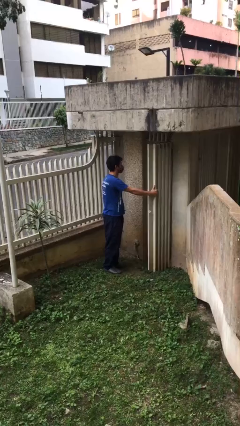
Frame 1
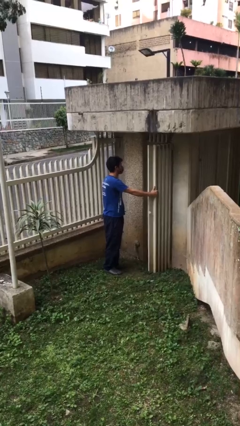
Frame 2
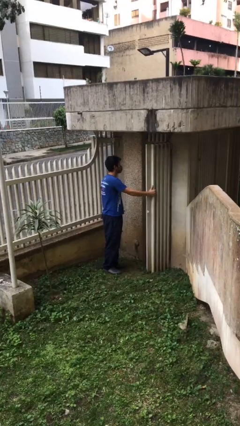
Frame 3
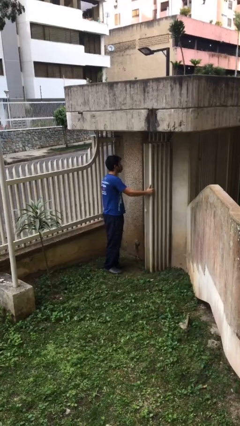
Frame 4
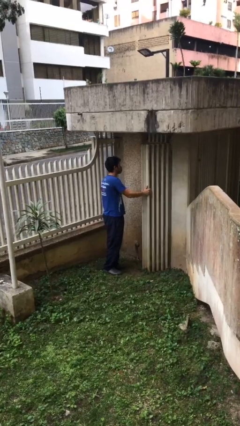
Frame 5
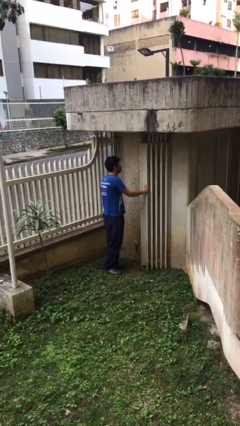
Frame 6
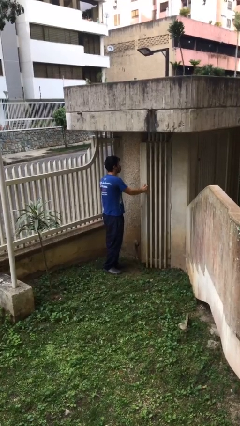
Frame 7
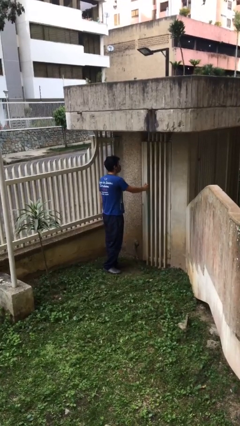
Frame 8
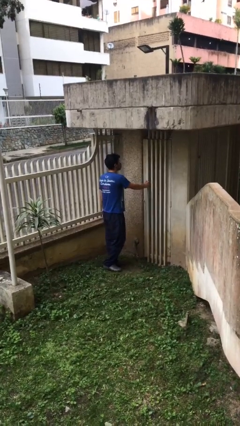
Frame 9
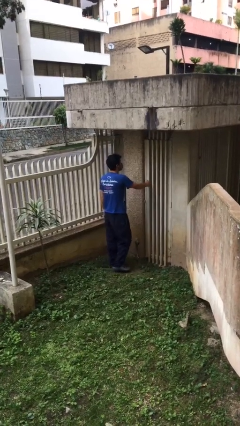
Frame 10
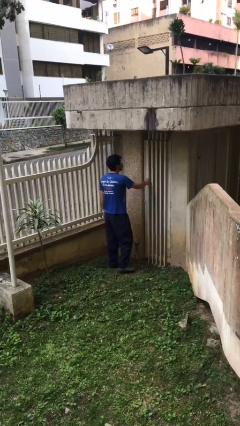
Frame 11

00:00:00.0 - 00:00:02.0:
person closes facility door

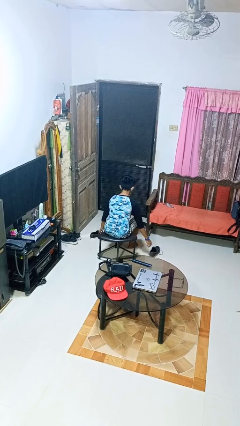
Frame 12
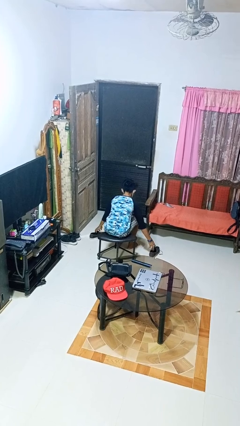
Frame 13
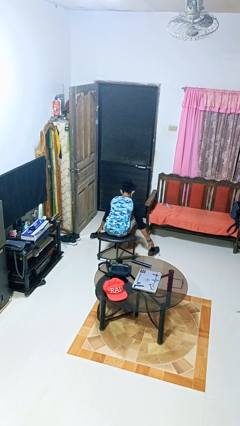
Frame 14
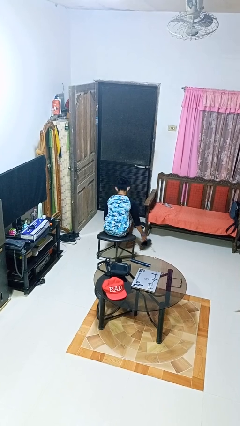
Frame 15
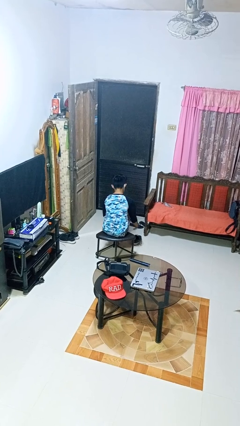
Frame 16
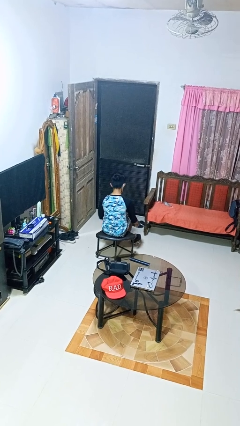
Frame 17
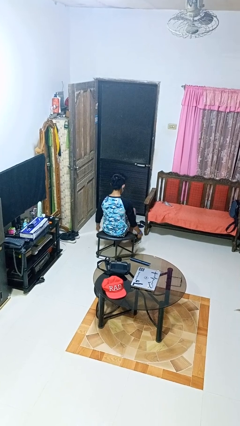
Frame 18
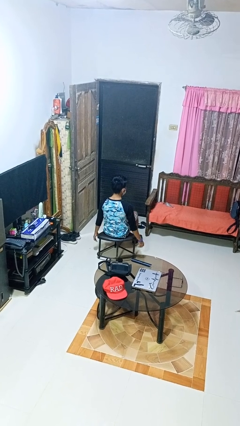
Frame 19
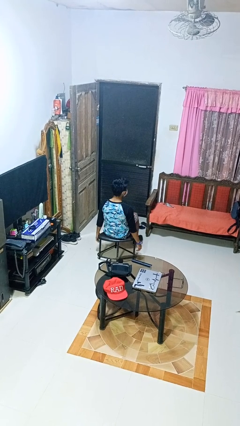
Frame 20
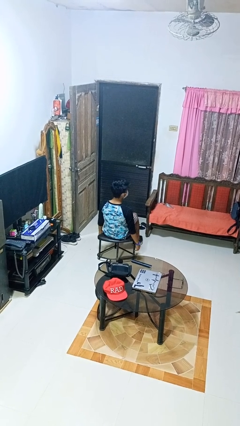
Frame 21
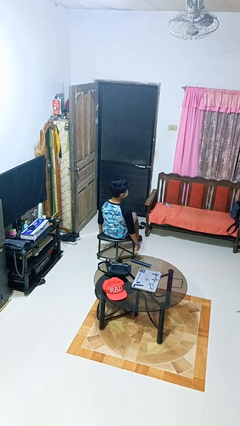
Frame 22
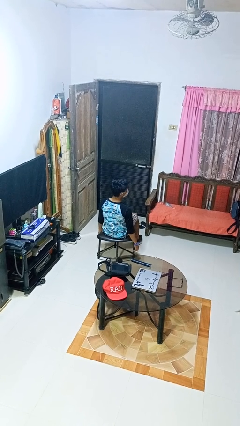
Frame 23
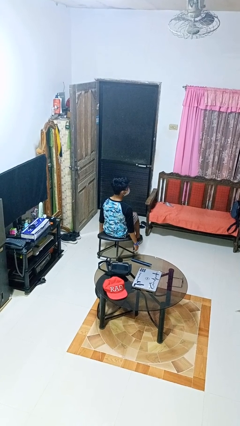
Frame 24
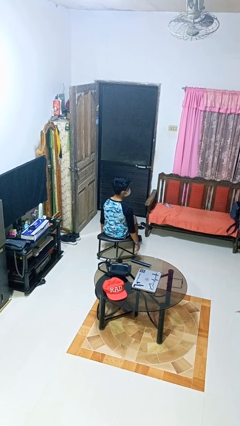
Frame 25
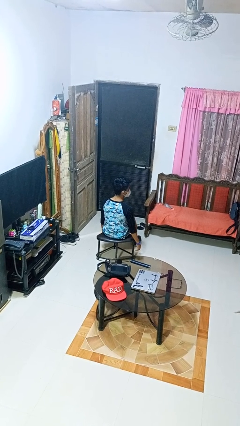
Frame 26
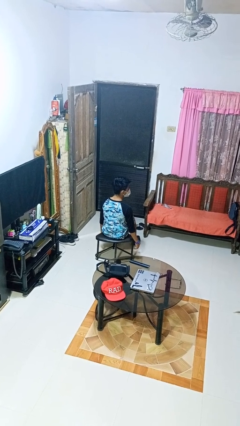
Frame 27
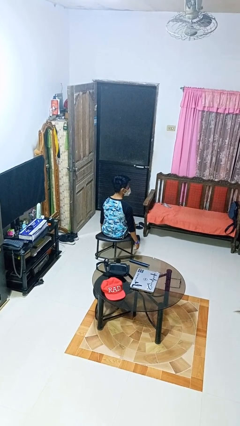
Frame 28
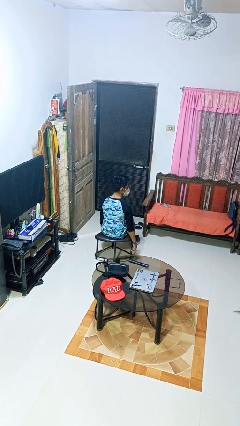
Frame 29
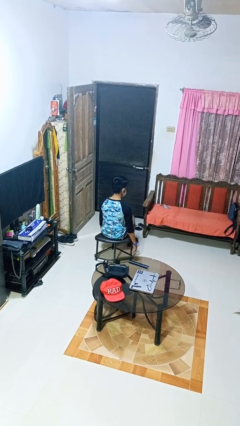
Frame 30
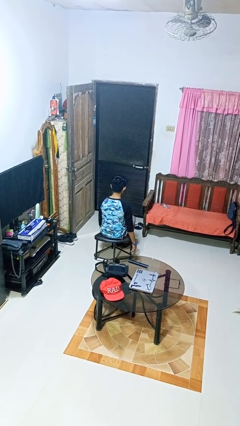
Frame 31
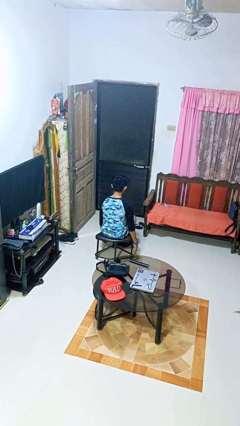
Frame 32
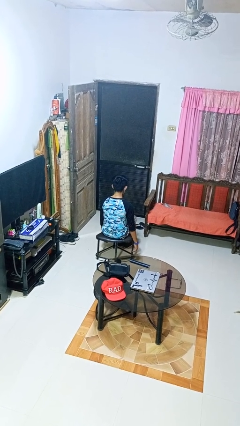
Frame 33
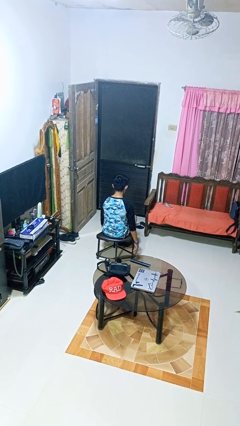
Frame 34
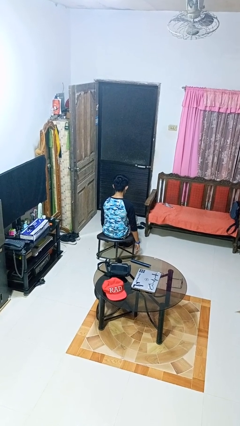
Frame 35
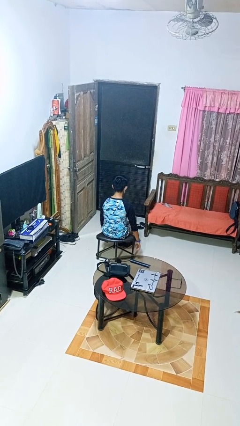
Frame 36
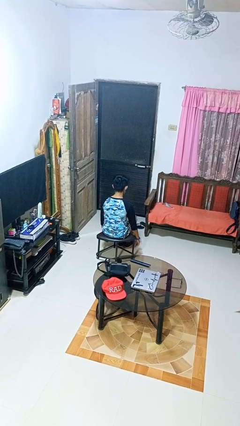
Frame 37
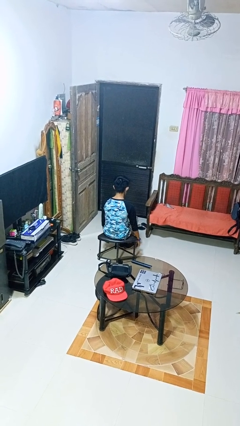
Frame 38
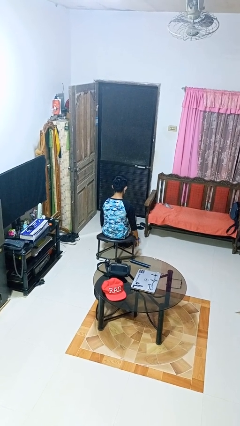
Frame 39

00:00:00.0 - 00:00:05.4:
person puts on shoes

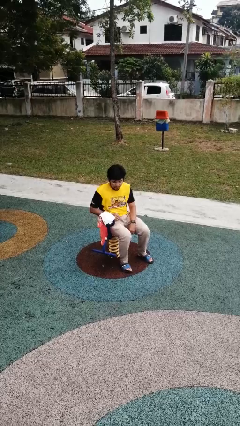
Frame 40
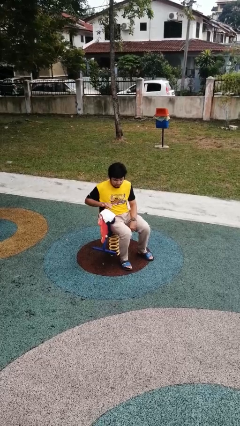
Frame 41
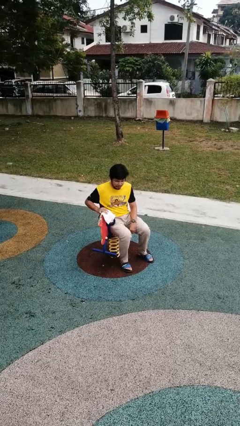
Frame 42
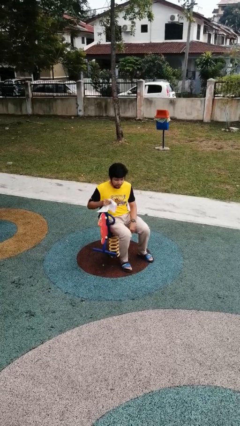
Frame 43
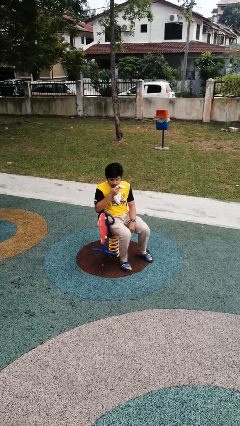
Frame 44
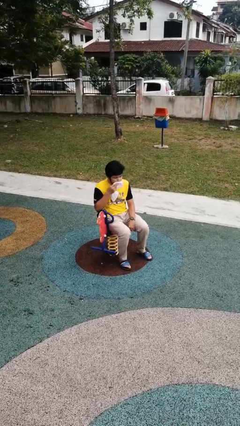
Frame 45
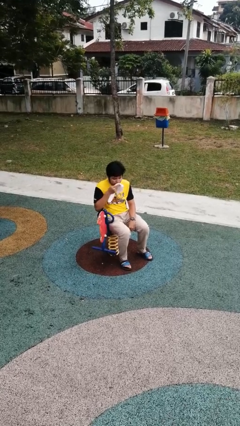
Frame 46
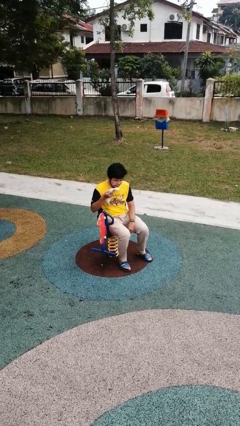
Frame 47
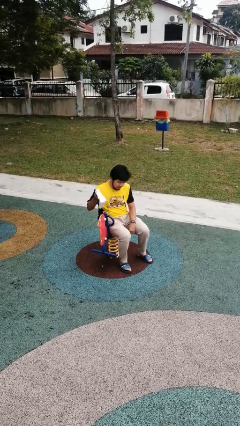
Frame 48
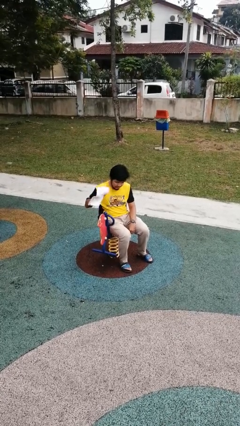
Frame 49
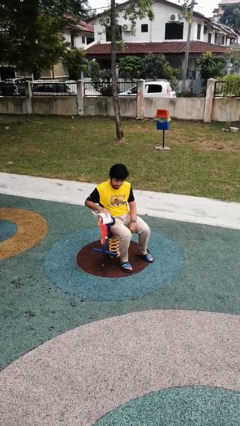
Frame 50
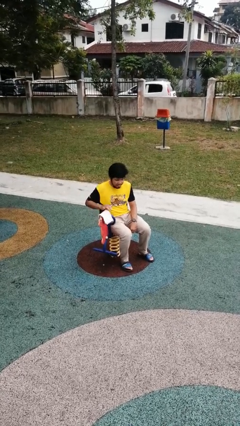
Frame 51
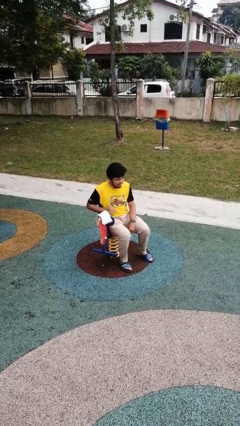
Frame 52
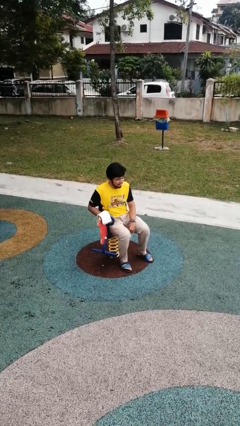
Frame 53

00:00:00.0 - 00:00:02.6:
person wipes mouth with napkin

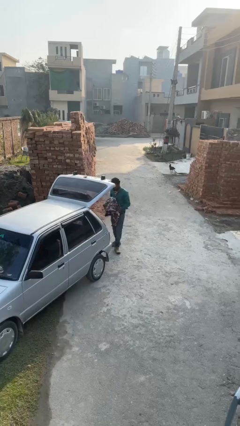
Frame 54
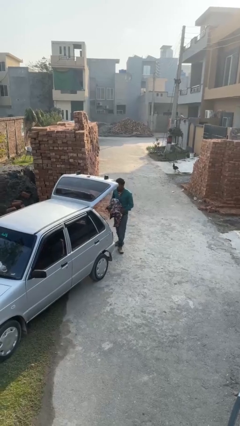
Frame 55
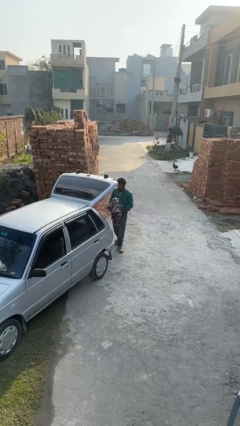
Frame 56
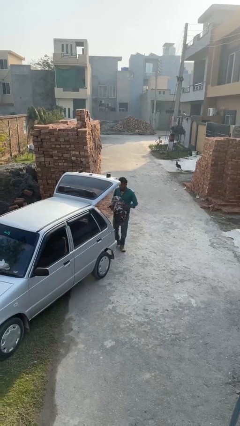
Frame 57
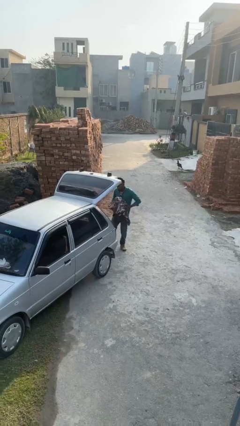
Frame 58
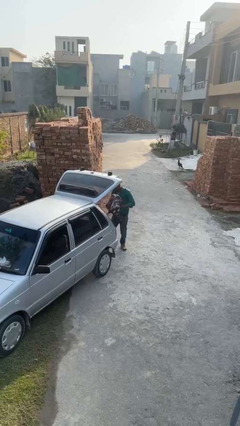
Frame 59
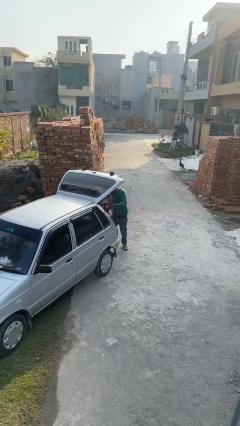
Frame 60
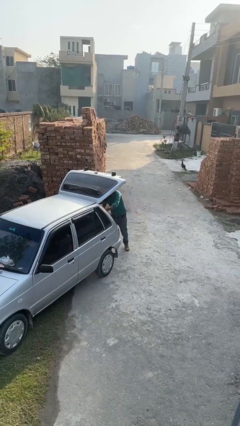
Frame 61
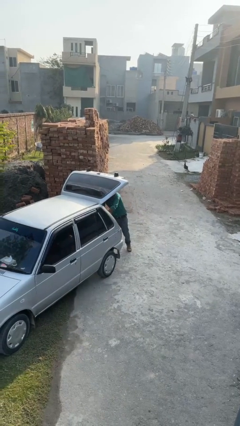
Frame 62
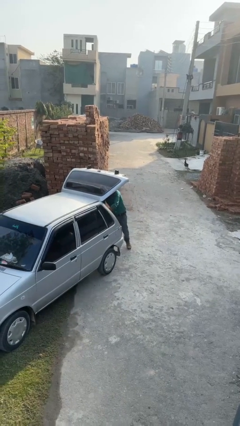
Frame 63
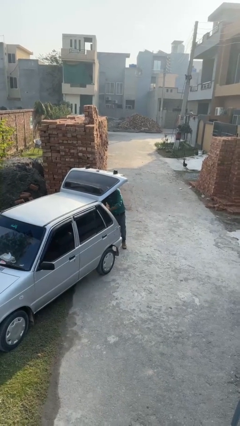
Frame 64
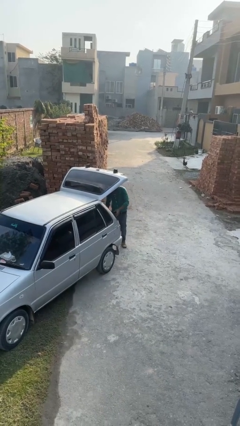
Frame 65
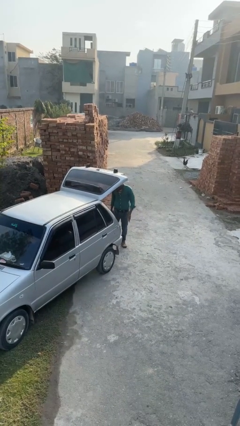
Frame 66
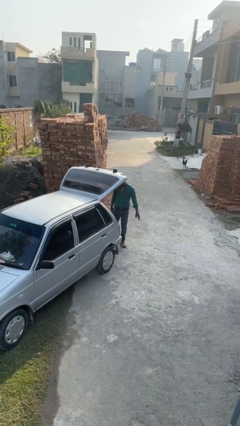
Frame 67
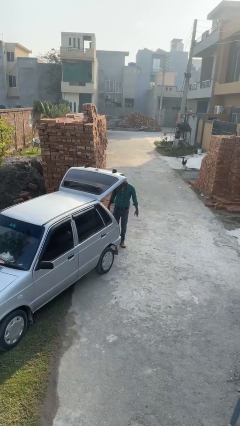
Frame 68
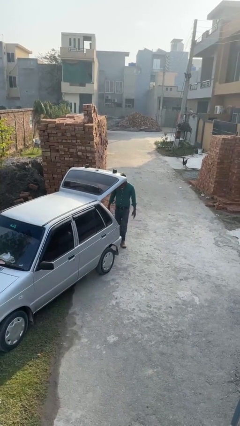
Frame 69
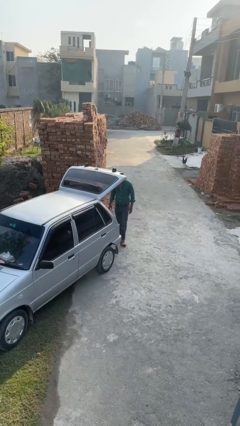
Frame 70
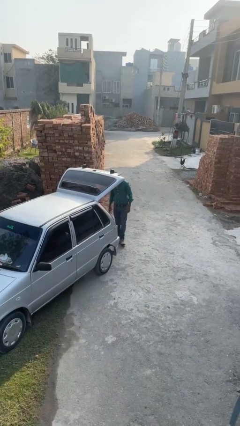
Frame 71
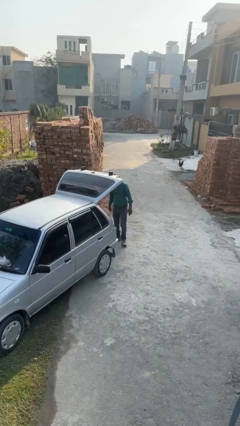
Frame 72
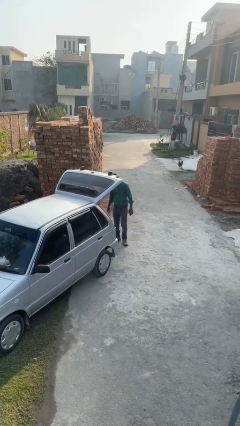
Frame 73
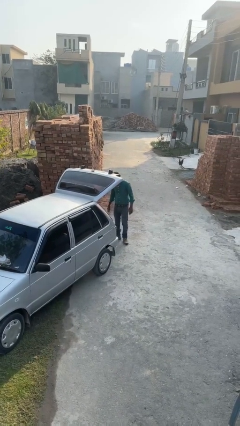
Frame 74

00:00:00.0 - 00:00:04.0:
person loads car

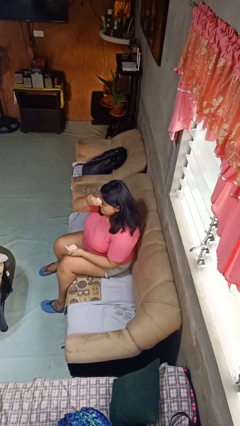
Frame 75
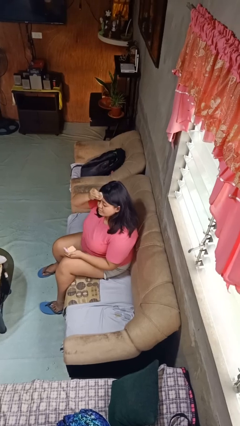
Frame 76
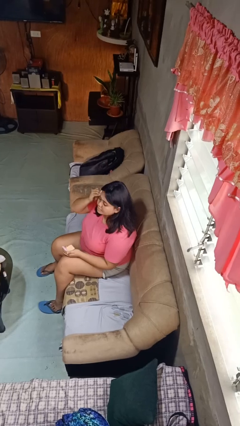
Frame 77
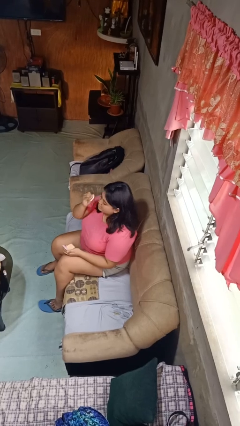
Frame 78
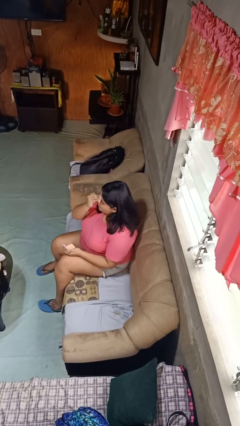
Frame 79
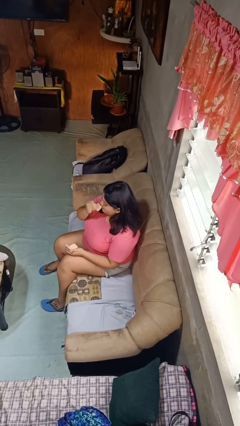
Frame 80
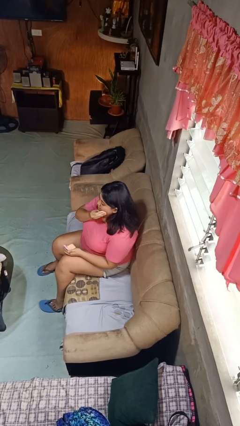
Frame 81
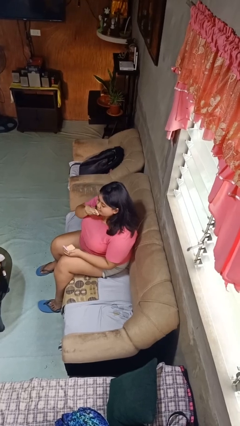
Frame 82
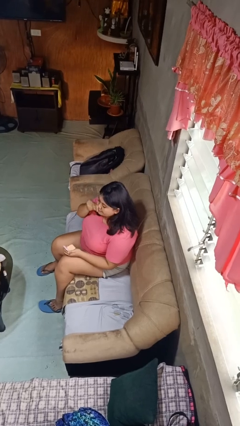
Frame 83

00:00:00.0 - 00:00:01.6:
person applies foundation makeup

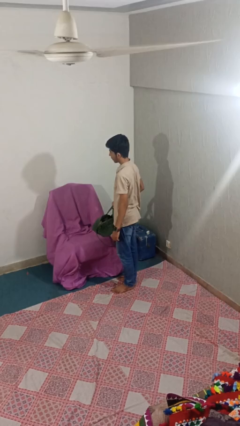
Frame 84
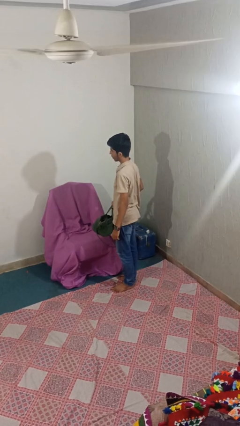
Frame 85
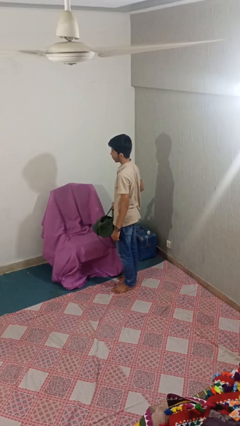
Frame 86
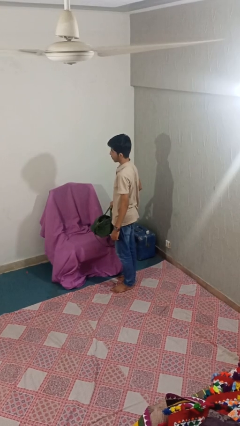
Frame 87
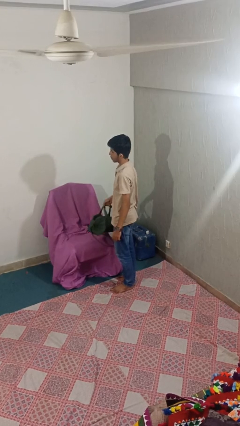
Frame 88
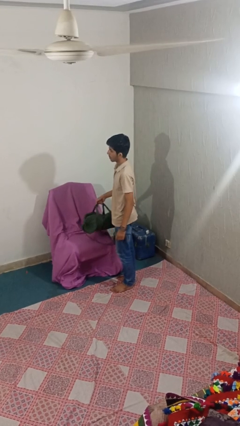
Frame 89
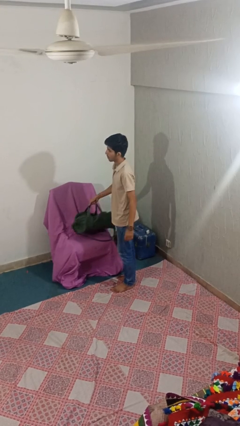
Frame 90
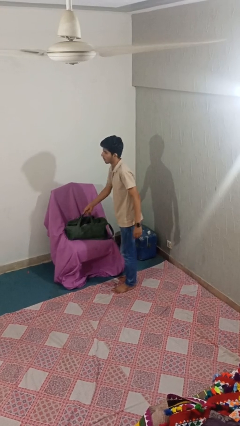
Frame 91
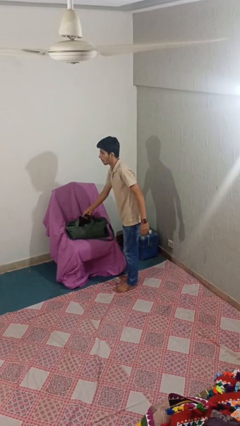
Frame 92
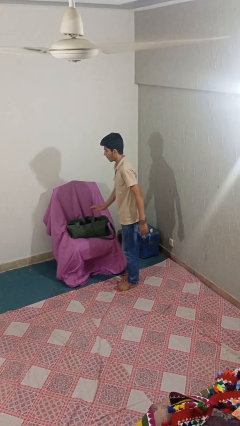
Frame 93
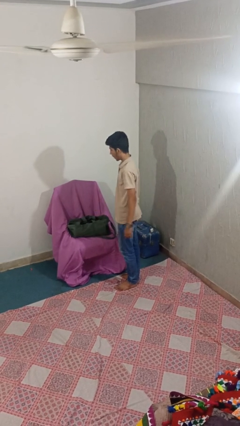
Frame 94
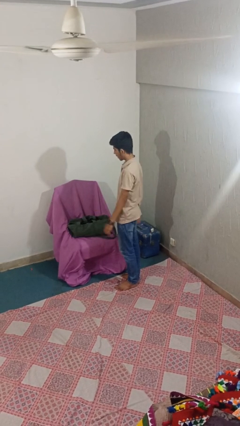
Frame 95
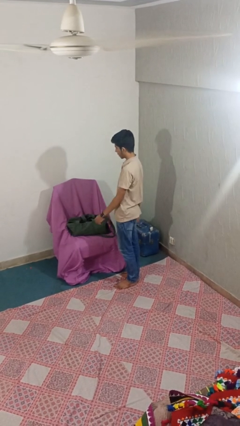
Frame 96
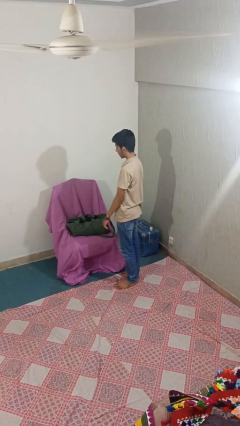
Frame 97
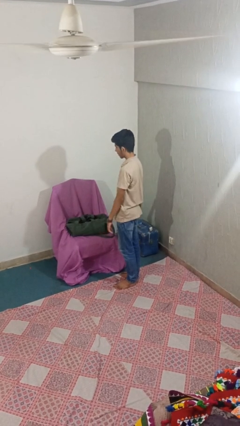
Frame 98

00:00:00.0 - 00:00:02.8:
person puts down object on couch
